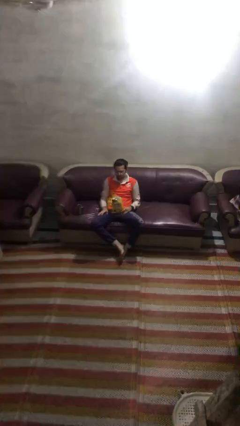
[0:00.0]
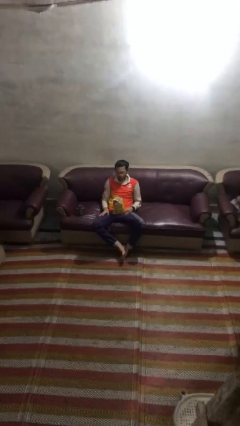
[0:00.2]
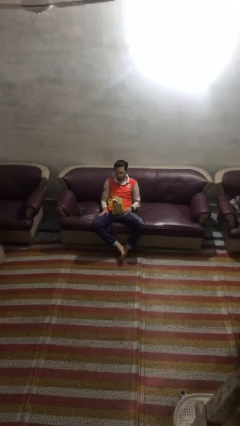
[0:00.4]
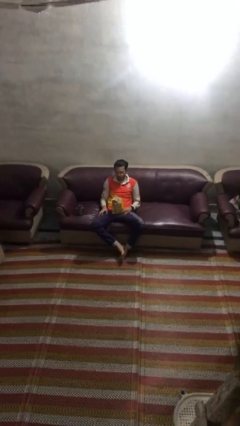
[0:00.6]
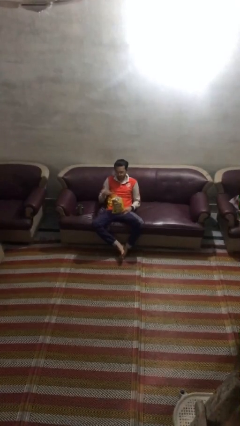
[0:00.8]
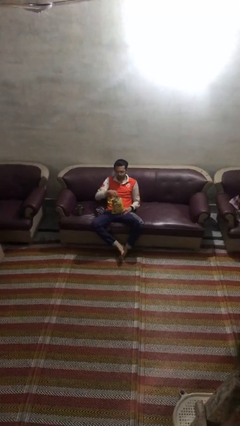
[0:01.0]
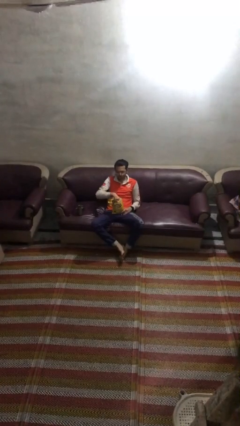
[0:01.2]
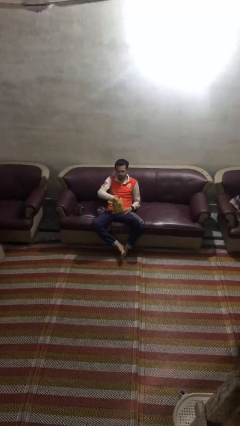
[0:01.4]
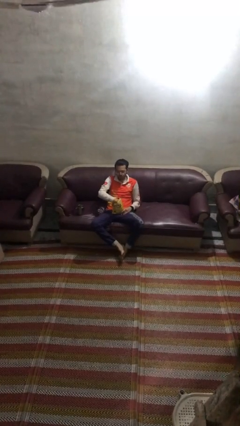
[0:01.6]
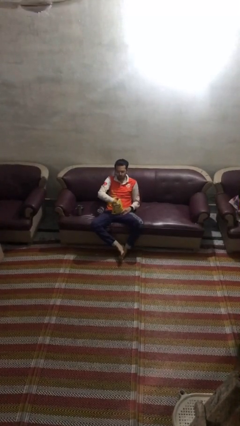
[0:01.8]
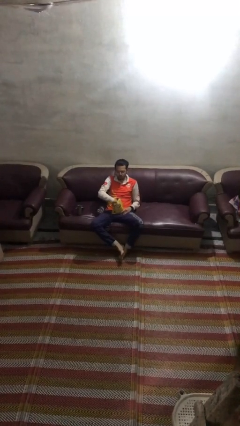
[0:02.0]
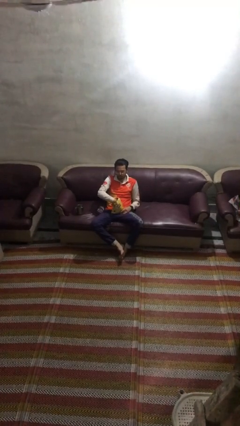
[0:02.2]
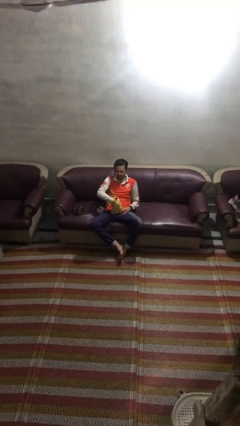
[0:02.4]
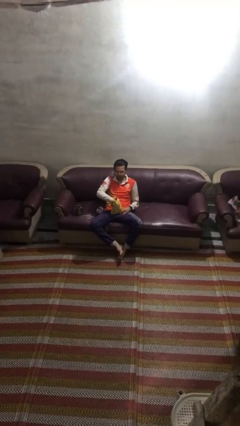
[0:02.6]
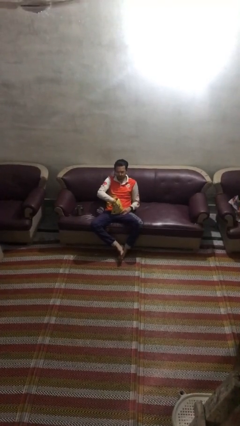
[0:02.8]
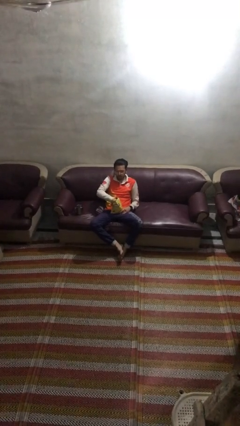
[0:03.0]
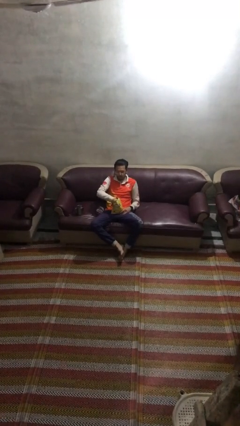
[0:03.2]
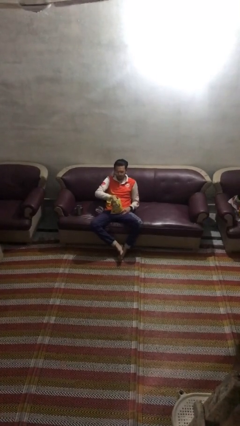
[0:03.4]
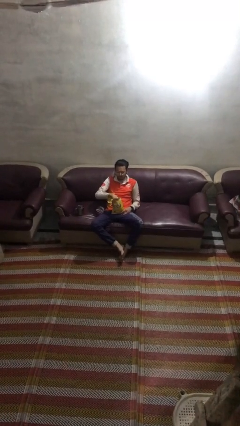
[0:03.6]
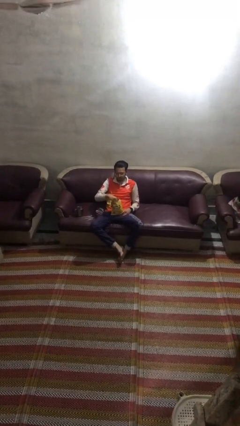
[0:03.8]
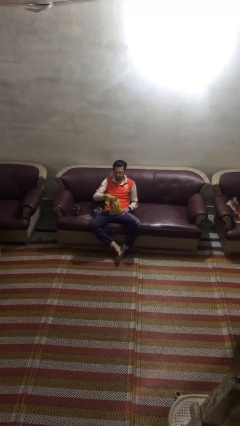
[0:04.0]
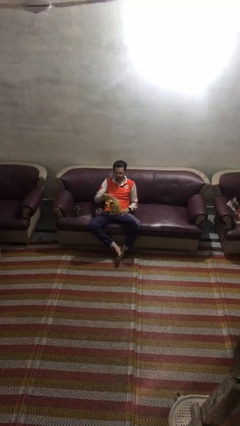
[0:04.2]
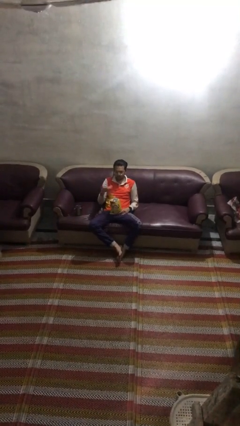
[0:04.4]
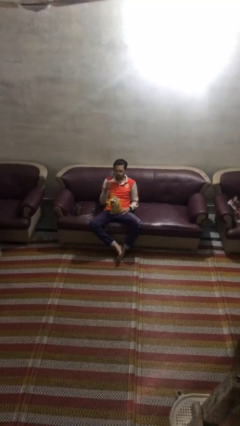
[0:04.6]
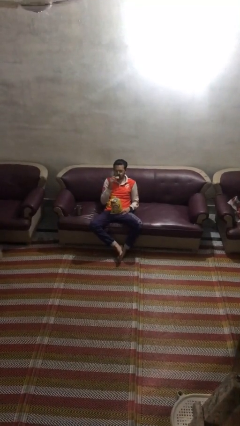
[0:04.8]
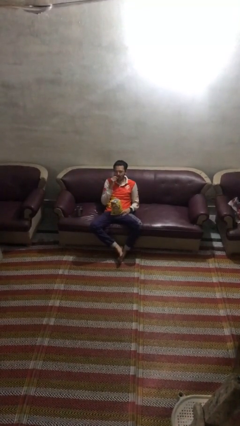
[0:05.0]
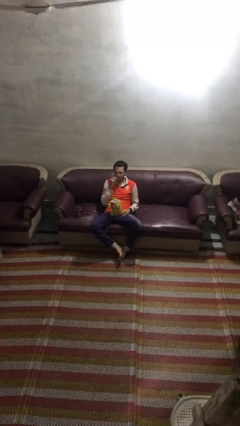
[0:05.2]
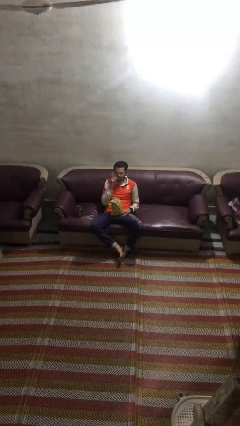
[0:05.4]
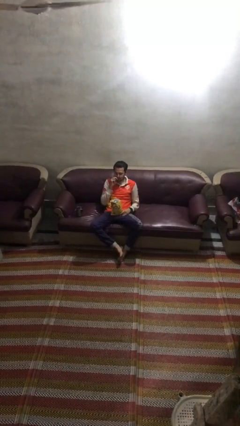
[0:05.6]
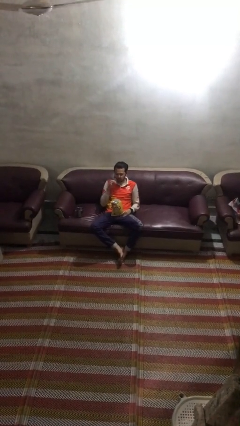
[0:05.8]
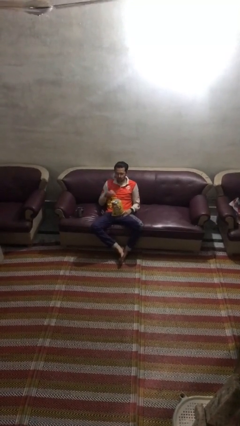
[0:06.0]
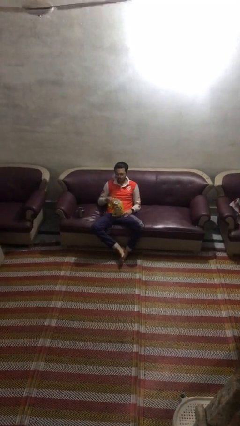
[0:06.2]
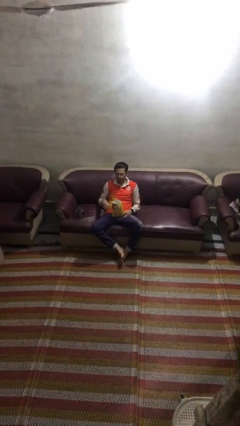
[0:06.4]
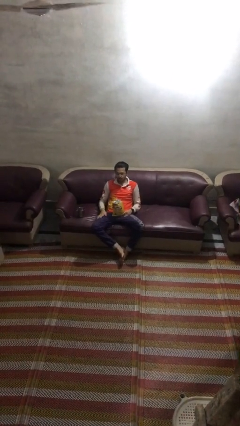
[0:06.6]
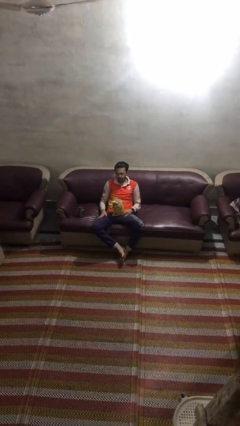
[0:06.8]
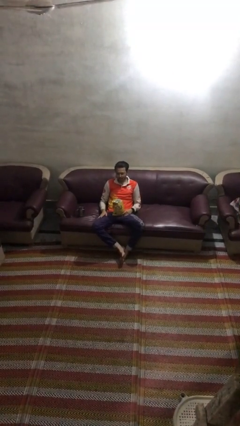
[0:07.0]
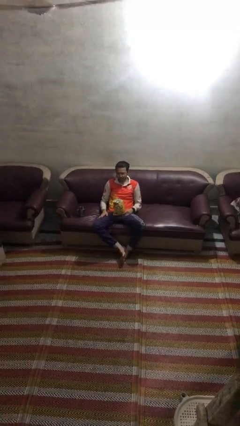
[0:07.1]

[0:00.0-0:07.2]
person eats snack from bag

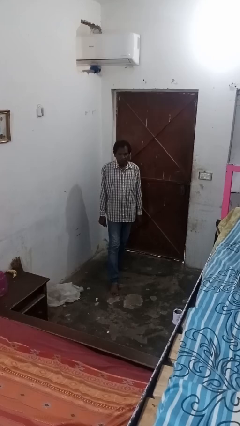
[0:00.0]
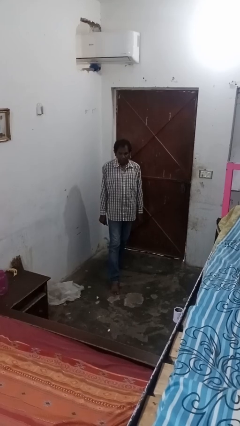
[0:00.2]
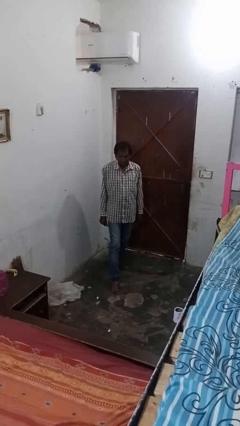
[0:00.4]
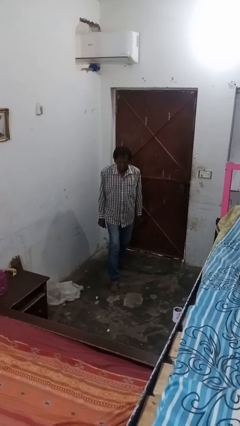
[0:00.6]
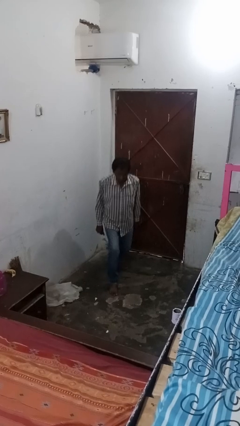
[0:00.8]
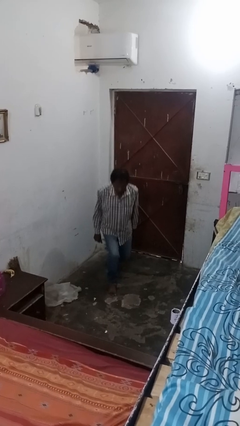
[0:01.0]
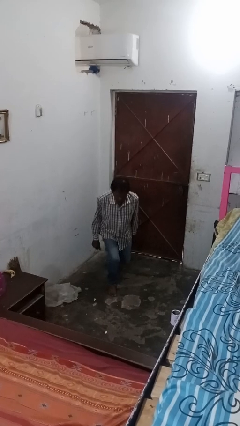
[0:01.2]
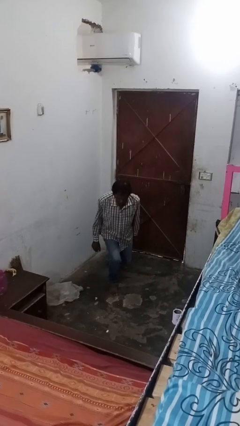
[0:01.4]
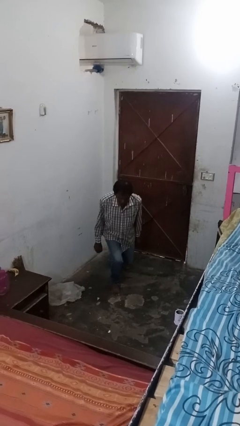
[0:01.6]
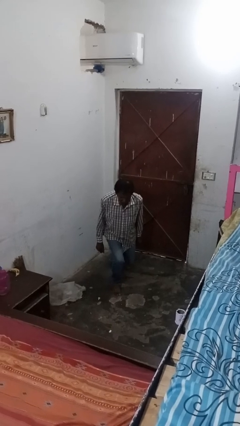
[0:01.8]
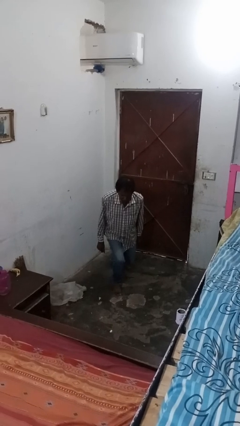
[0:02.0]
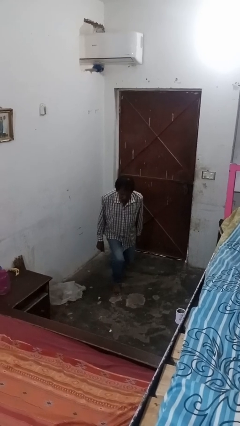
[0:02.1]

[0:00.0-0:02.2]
person exercises with lunges

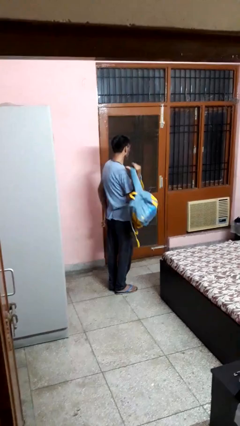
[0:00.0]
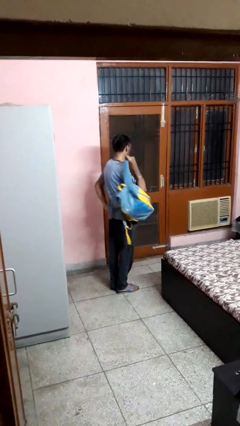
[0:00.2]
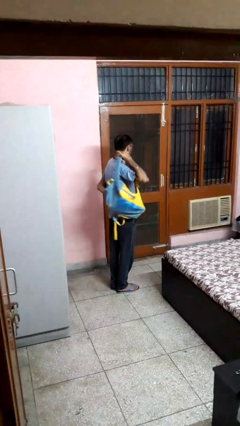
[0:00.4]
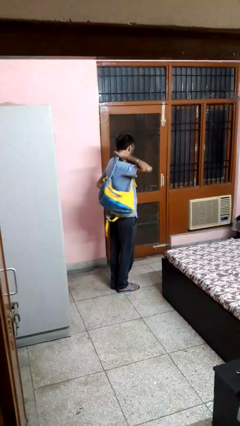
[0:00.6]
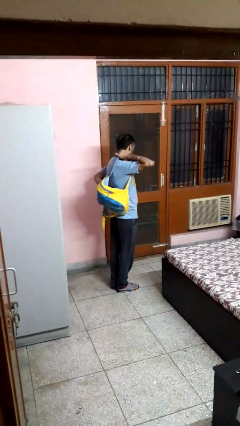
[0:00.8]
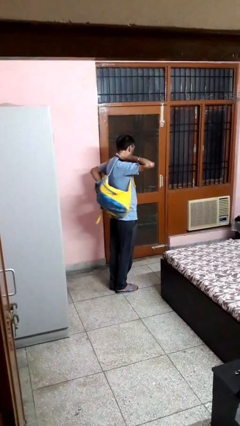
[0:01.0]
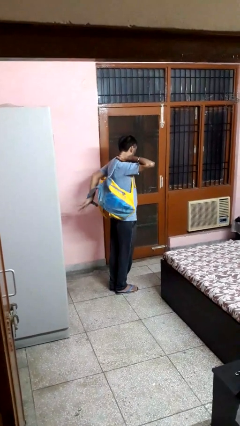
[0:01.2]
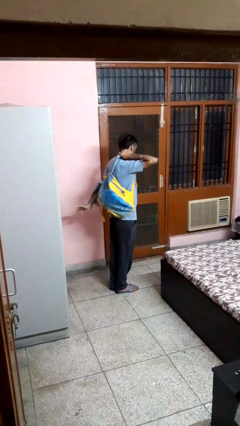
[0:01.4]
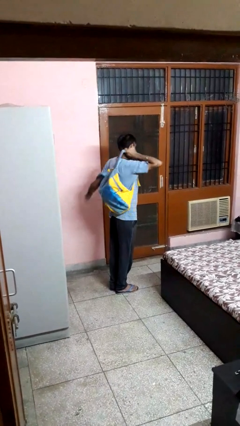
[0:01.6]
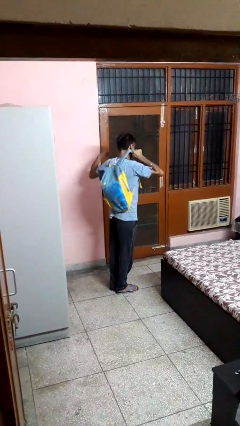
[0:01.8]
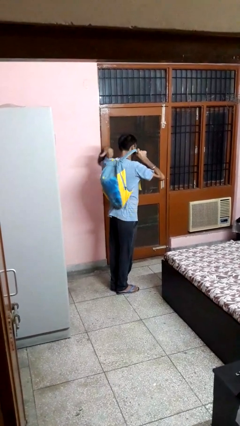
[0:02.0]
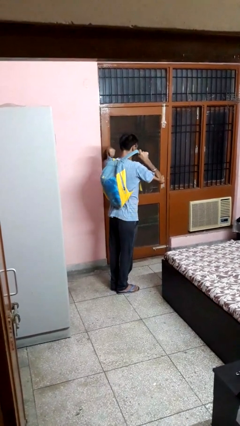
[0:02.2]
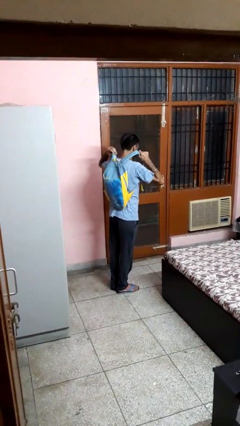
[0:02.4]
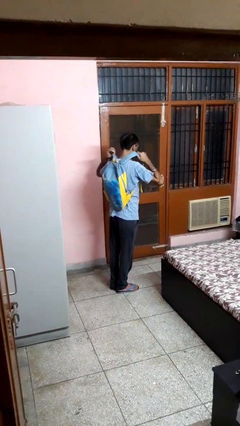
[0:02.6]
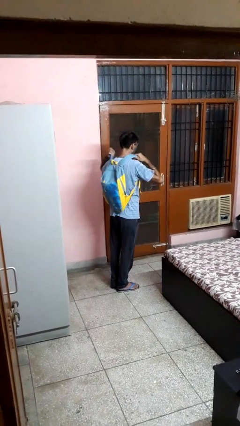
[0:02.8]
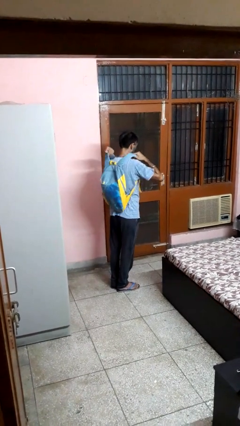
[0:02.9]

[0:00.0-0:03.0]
person puts on backpack

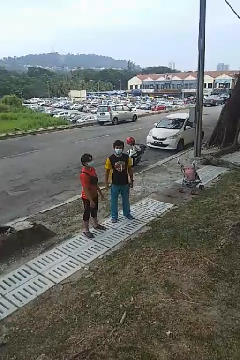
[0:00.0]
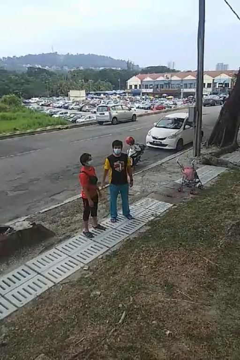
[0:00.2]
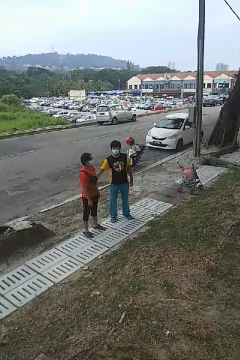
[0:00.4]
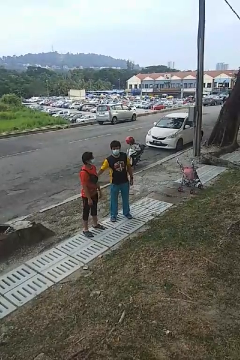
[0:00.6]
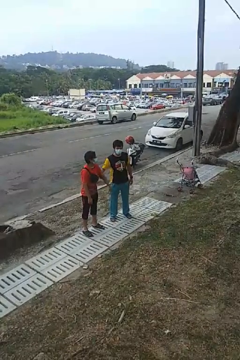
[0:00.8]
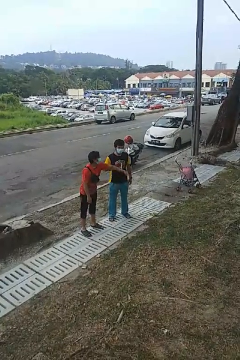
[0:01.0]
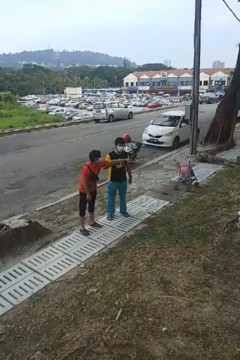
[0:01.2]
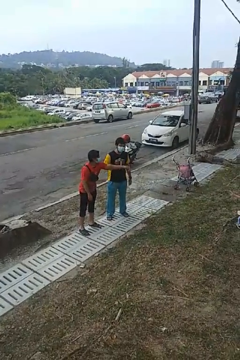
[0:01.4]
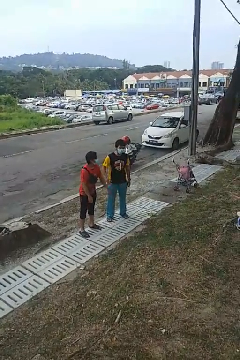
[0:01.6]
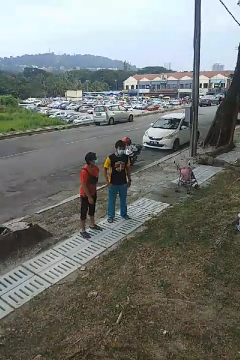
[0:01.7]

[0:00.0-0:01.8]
person grabs person by bicep

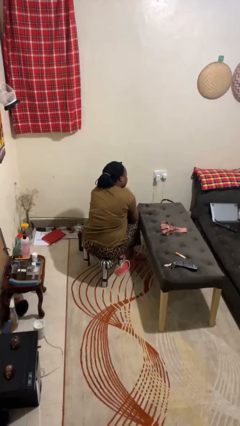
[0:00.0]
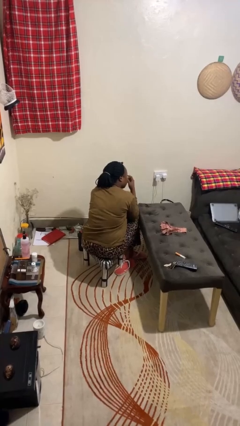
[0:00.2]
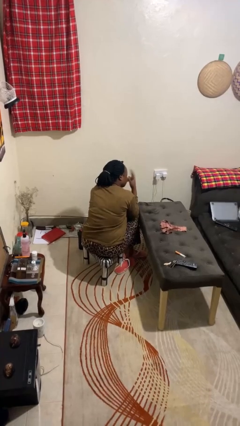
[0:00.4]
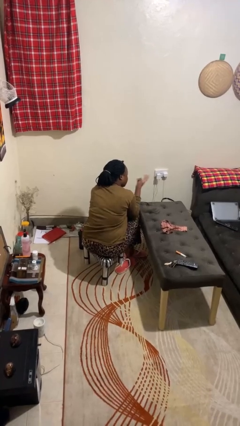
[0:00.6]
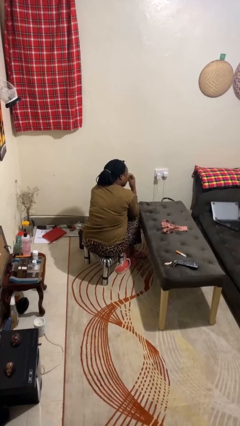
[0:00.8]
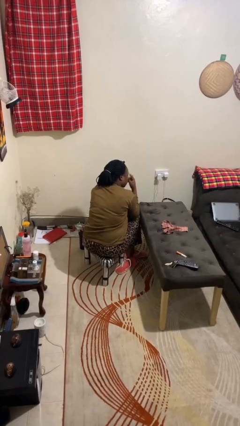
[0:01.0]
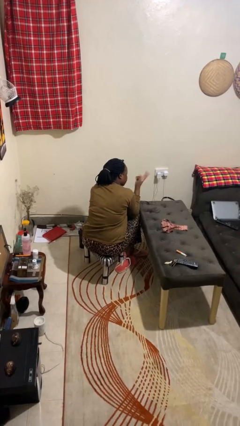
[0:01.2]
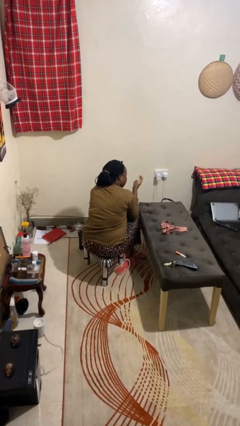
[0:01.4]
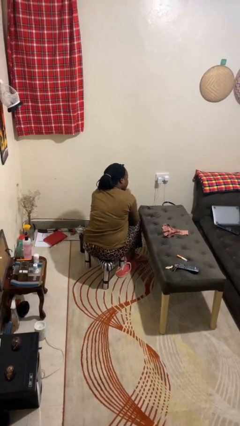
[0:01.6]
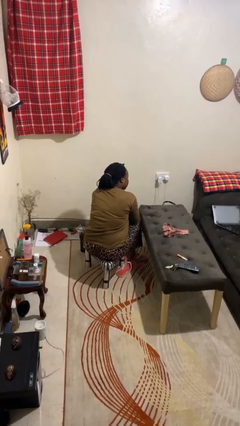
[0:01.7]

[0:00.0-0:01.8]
person gestures watch closely

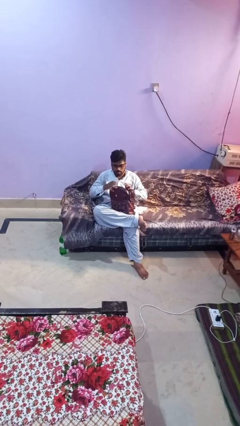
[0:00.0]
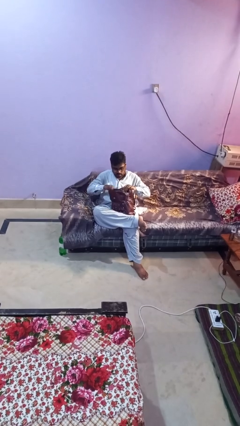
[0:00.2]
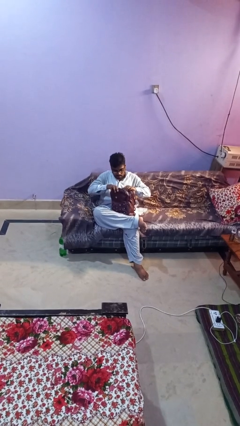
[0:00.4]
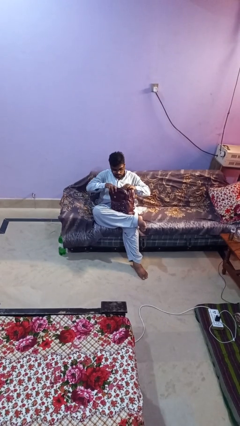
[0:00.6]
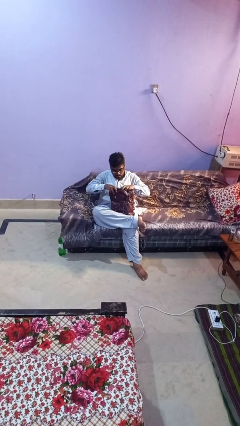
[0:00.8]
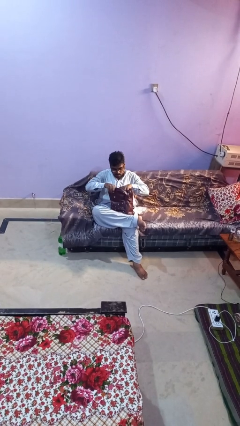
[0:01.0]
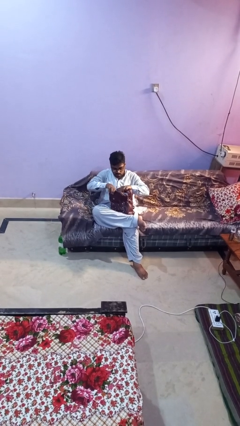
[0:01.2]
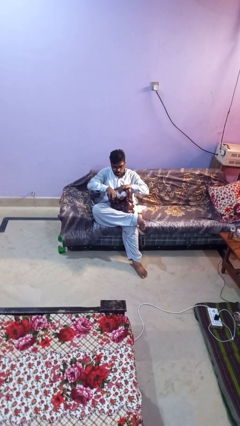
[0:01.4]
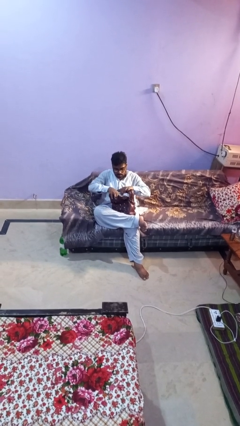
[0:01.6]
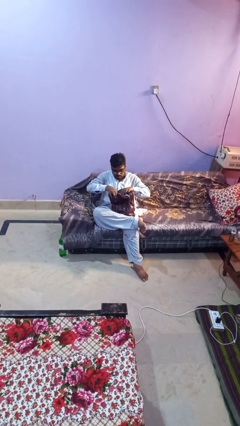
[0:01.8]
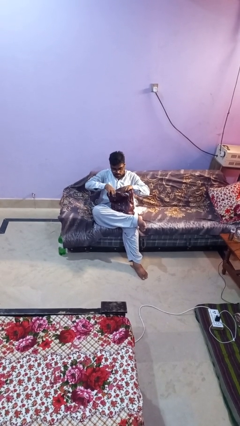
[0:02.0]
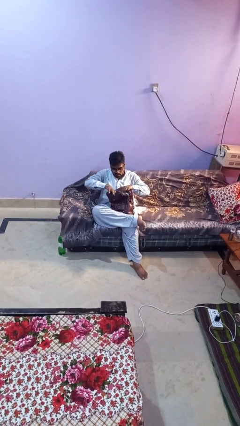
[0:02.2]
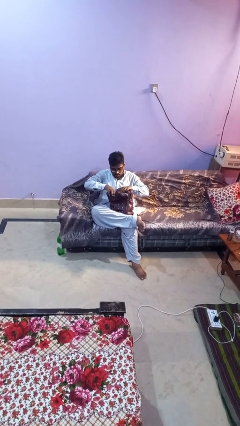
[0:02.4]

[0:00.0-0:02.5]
person searches in backpack
